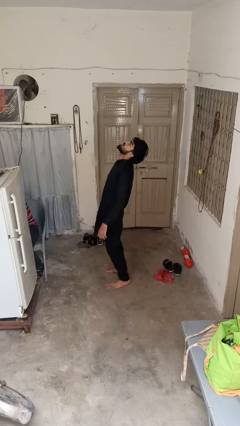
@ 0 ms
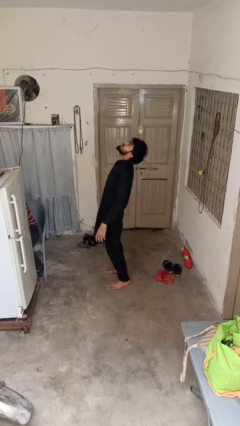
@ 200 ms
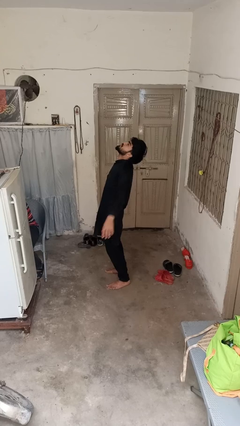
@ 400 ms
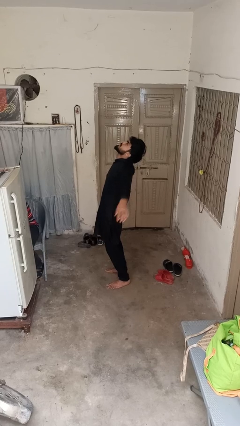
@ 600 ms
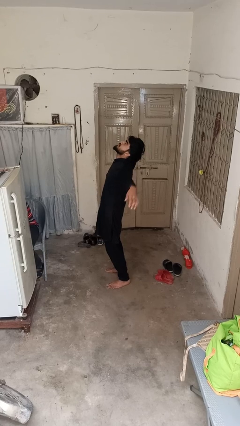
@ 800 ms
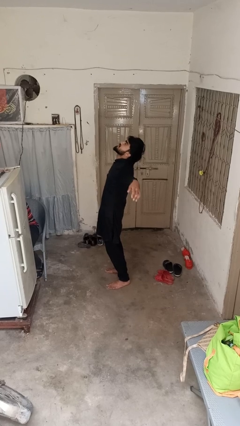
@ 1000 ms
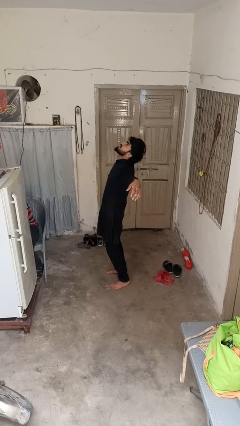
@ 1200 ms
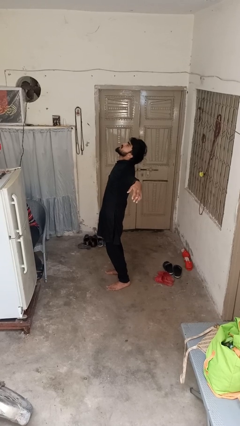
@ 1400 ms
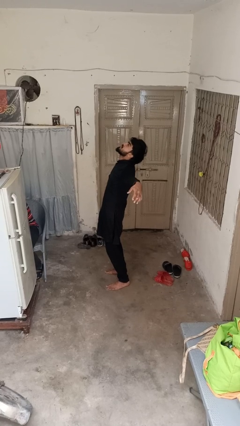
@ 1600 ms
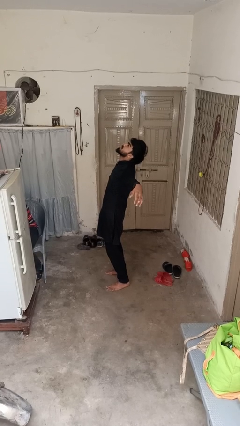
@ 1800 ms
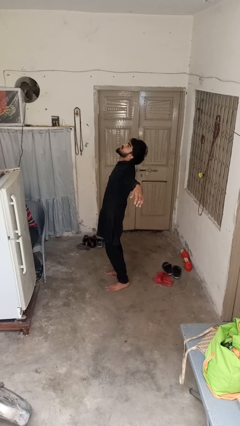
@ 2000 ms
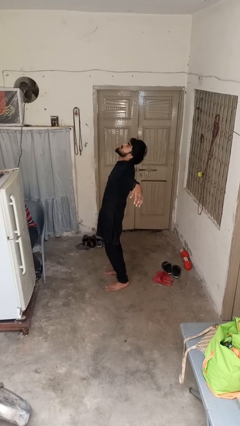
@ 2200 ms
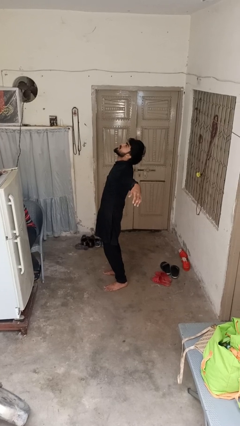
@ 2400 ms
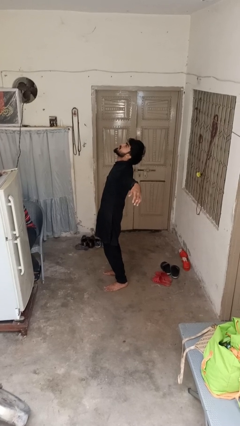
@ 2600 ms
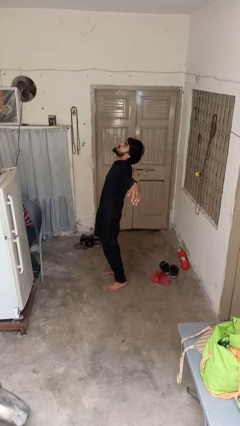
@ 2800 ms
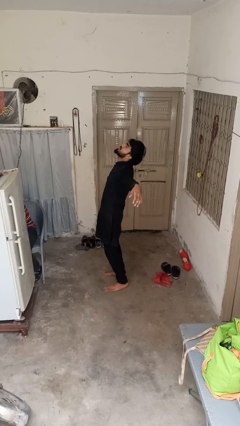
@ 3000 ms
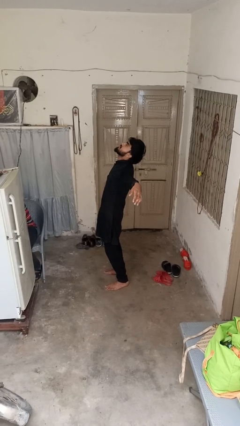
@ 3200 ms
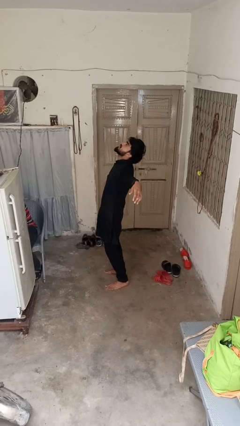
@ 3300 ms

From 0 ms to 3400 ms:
person stretches arms to side

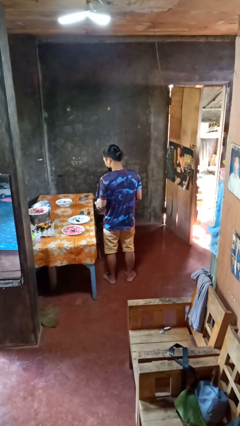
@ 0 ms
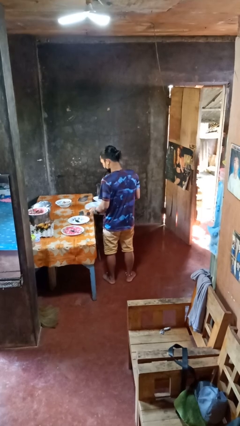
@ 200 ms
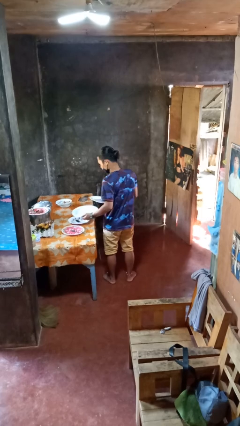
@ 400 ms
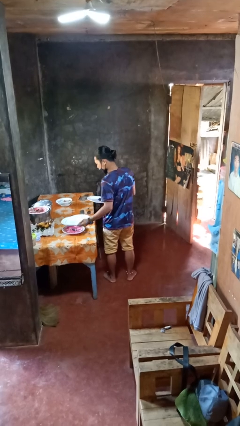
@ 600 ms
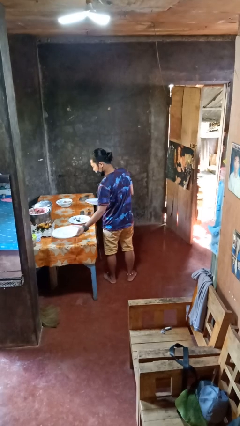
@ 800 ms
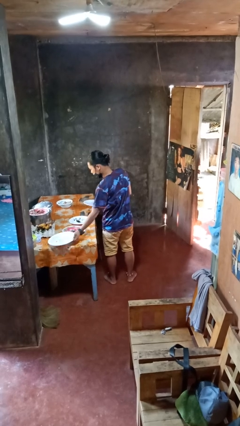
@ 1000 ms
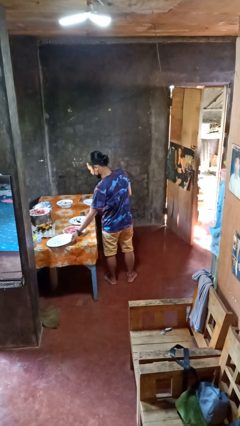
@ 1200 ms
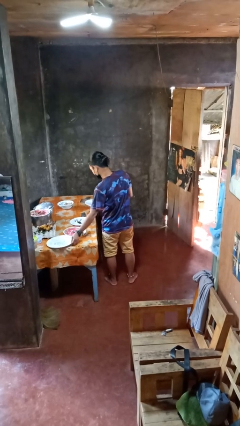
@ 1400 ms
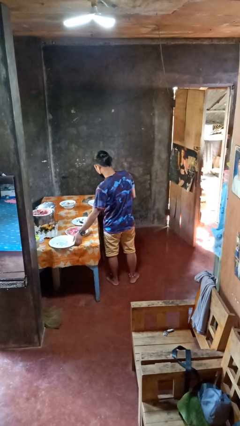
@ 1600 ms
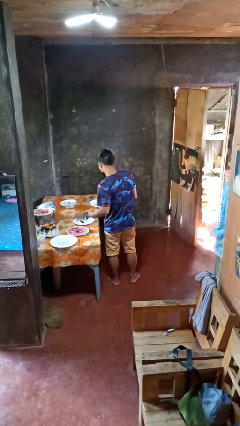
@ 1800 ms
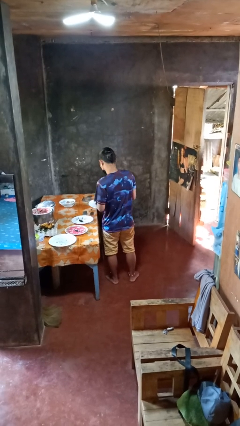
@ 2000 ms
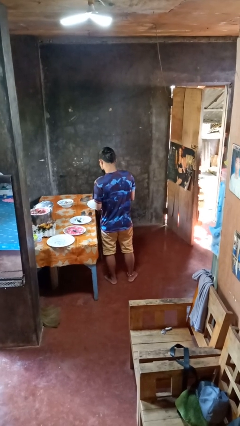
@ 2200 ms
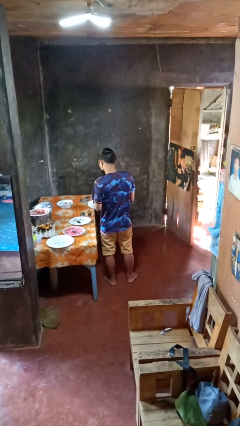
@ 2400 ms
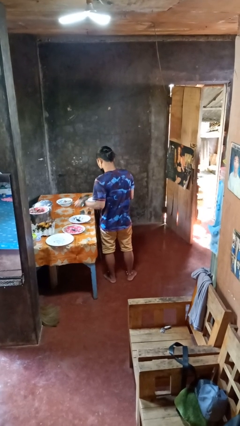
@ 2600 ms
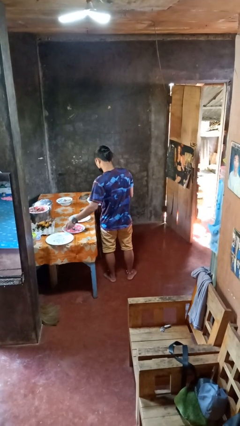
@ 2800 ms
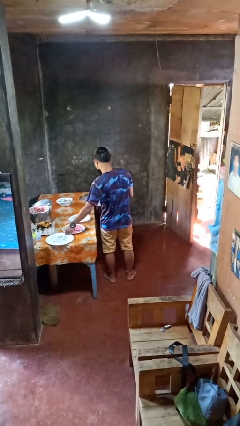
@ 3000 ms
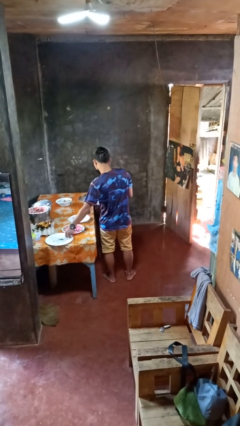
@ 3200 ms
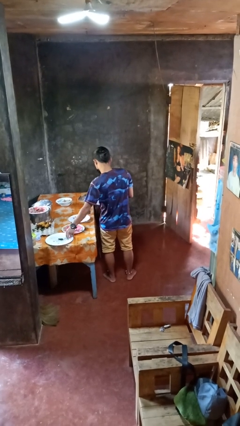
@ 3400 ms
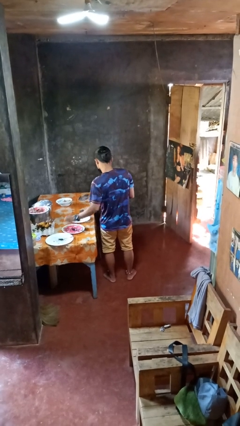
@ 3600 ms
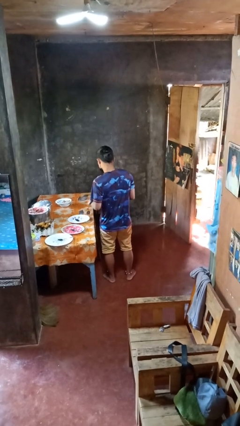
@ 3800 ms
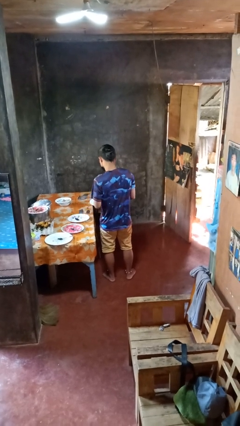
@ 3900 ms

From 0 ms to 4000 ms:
person sets table

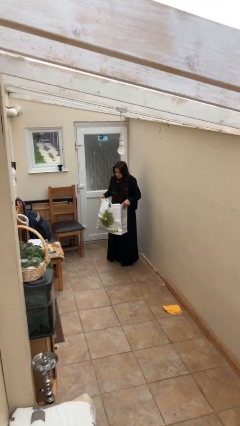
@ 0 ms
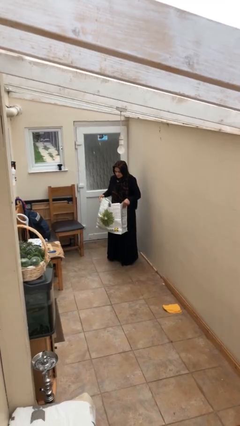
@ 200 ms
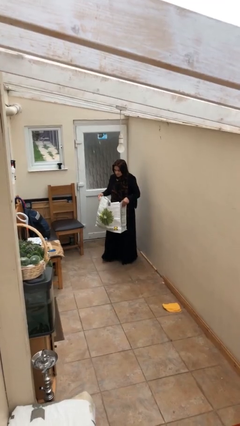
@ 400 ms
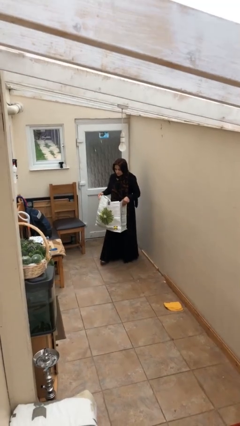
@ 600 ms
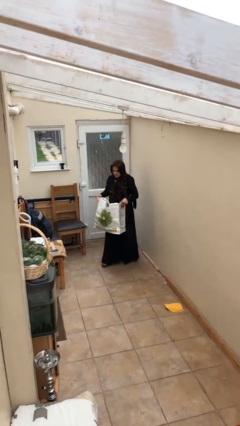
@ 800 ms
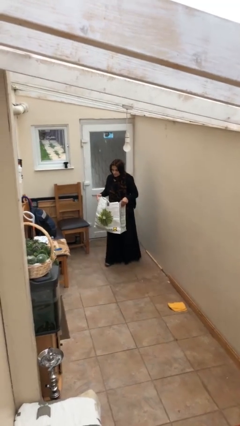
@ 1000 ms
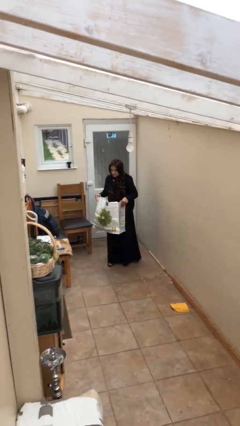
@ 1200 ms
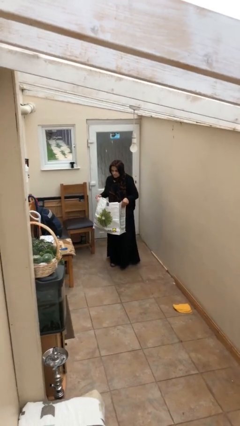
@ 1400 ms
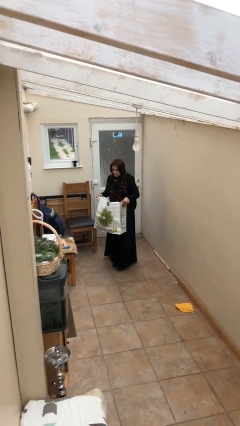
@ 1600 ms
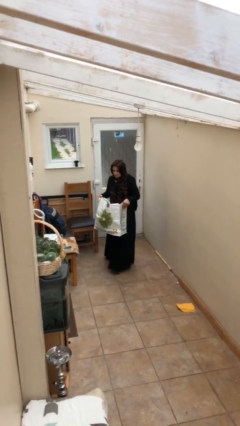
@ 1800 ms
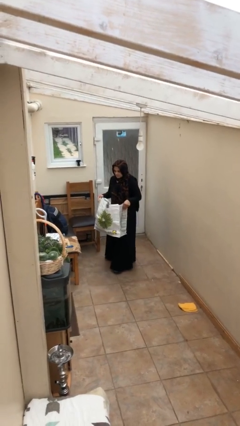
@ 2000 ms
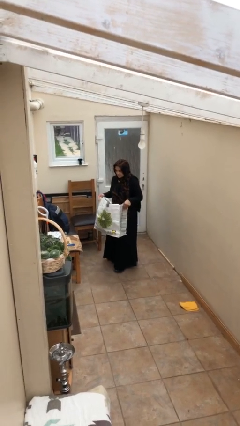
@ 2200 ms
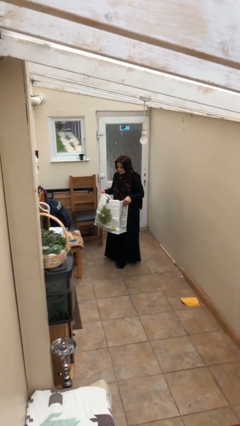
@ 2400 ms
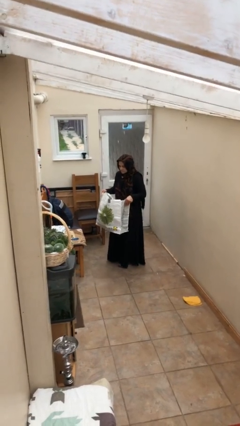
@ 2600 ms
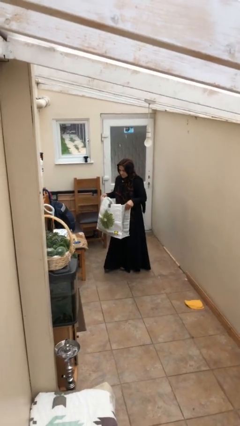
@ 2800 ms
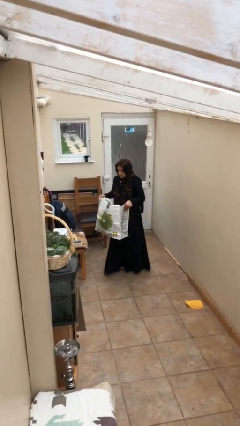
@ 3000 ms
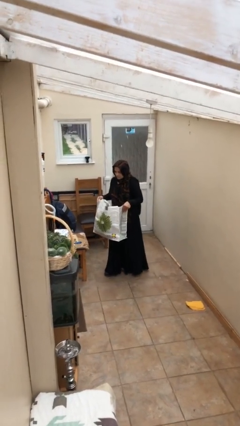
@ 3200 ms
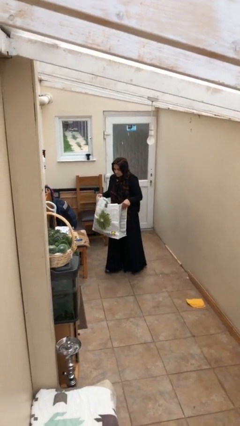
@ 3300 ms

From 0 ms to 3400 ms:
person carries heavy object

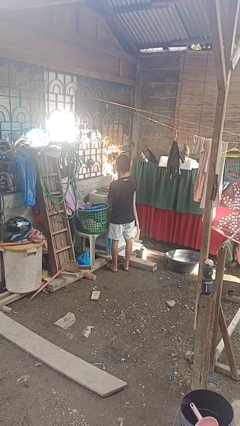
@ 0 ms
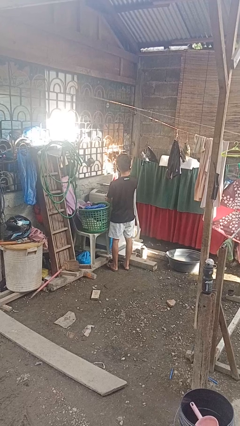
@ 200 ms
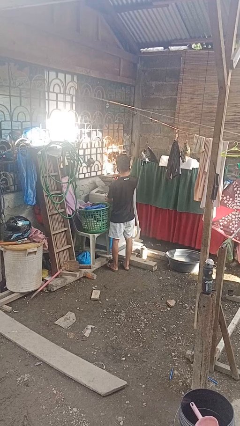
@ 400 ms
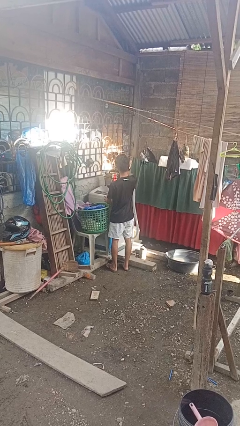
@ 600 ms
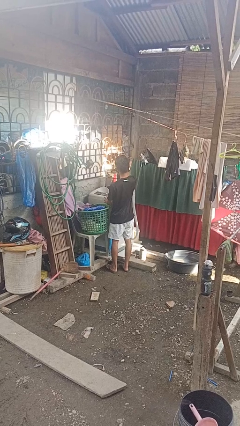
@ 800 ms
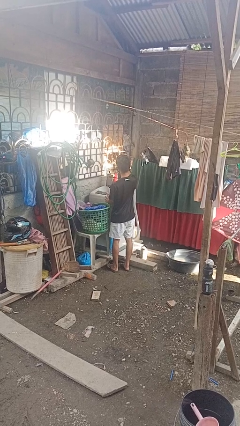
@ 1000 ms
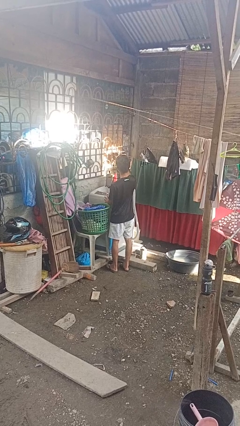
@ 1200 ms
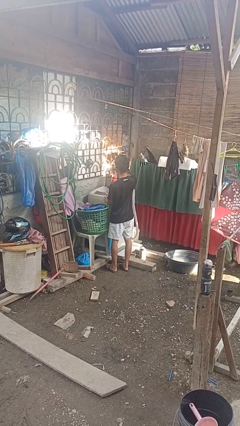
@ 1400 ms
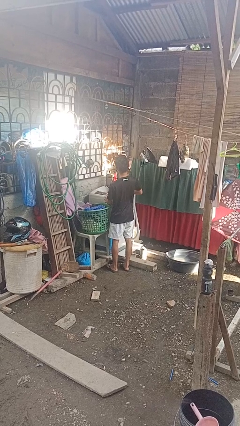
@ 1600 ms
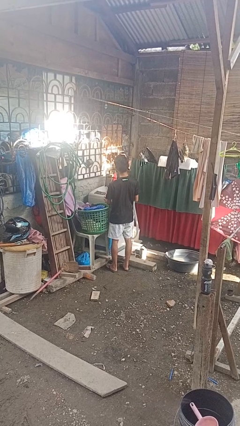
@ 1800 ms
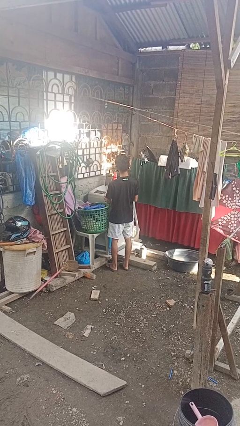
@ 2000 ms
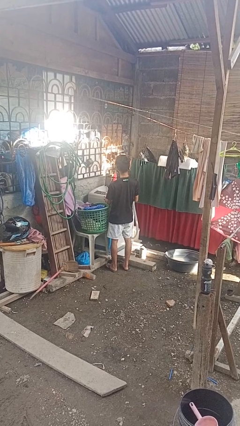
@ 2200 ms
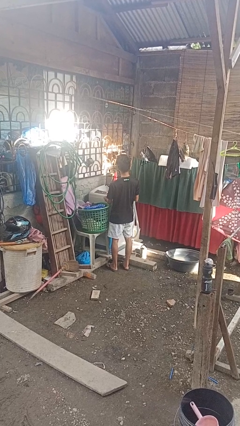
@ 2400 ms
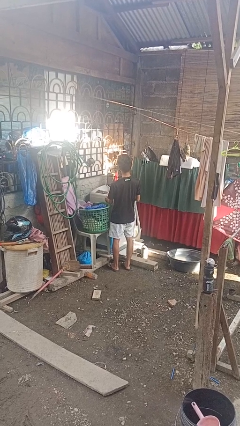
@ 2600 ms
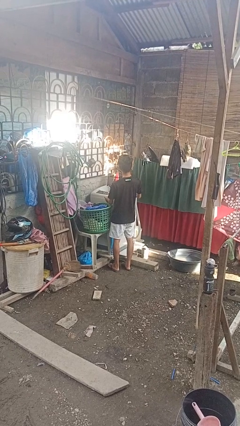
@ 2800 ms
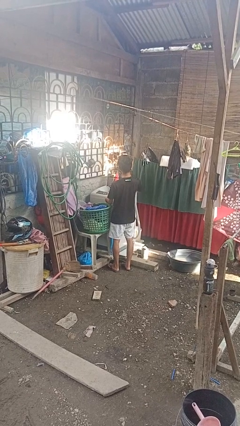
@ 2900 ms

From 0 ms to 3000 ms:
person opens clothes washer

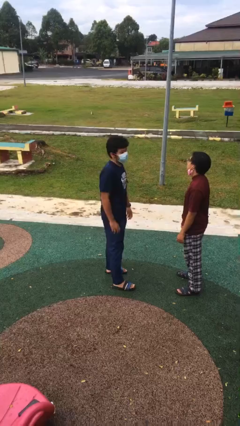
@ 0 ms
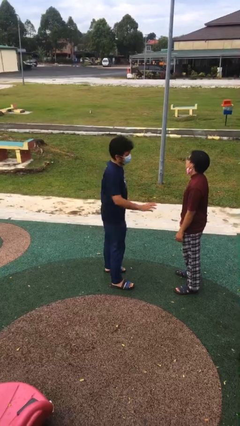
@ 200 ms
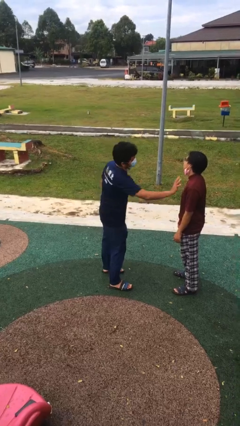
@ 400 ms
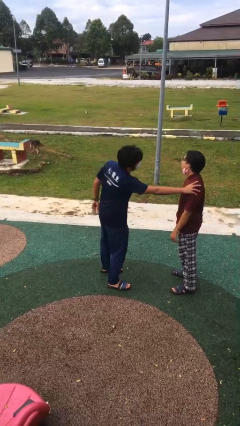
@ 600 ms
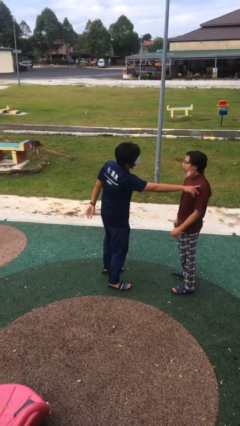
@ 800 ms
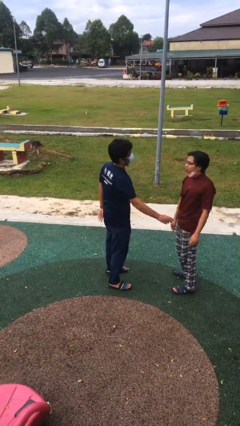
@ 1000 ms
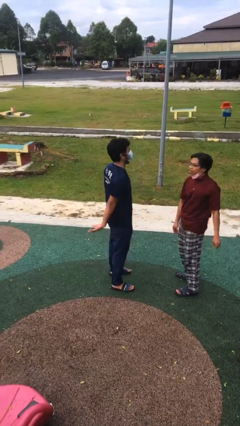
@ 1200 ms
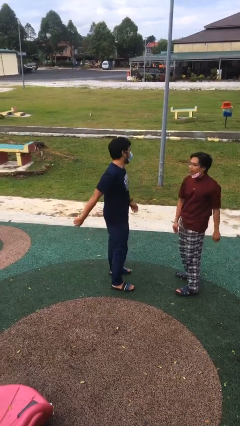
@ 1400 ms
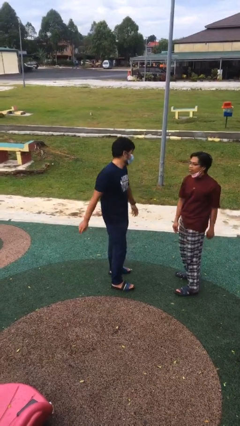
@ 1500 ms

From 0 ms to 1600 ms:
person shoves person

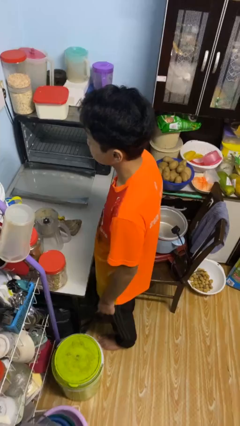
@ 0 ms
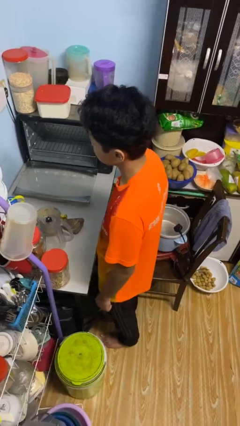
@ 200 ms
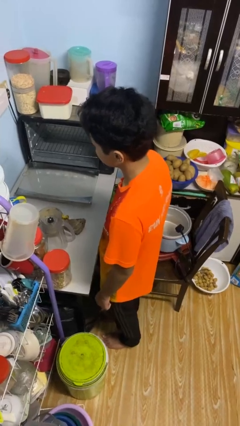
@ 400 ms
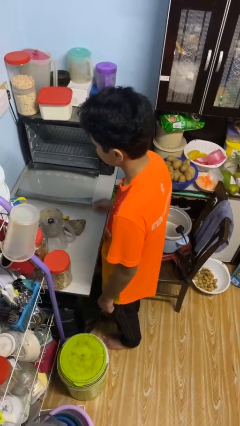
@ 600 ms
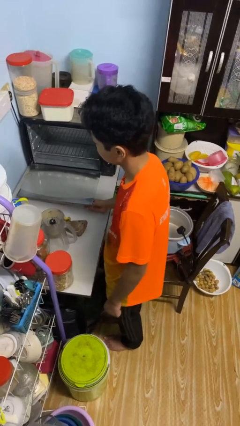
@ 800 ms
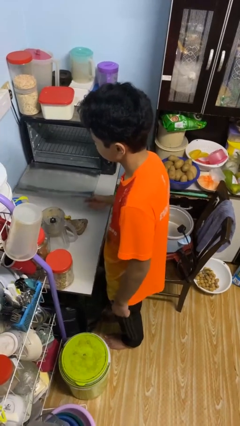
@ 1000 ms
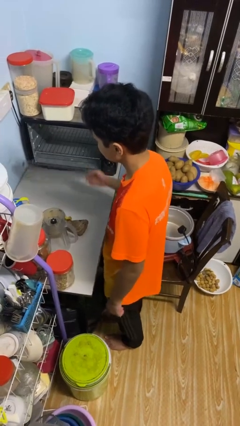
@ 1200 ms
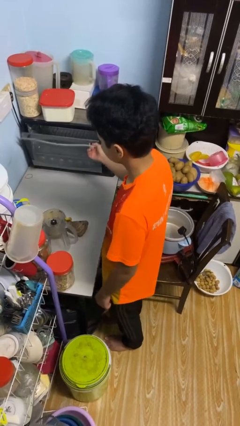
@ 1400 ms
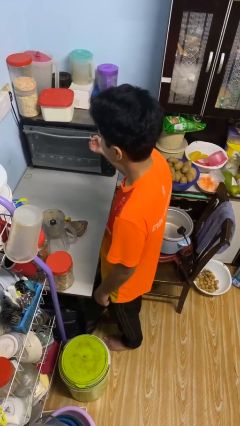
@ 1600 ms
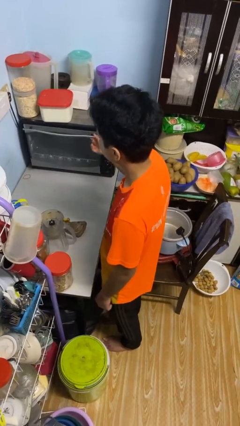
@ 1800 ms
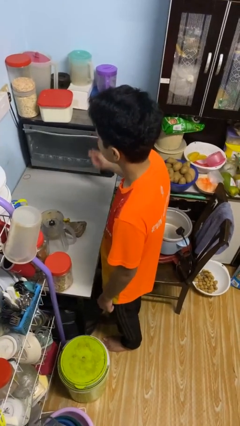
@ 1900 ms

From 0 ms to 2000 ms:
person closes oven door

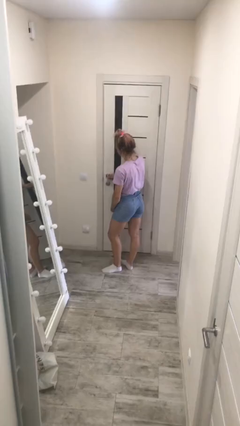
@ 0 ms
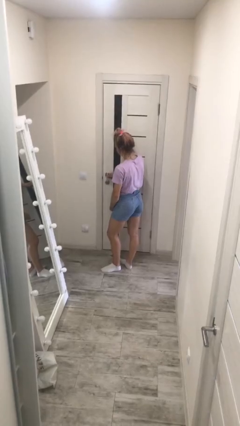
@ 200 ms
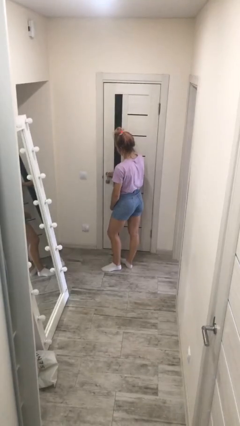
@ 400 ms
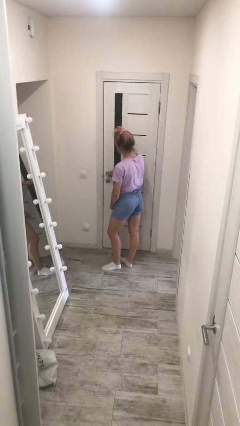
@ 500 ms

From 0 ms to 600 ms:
person closes facility door
